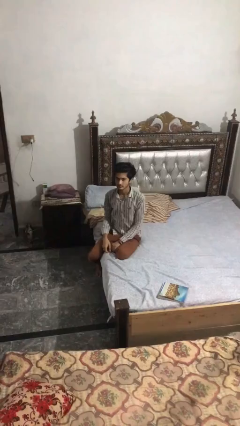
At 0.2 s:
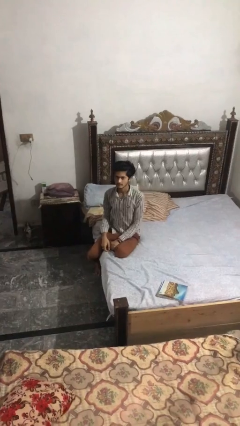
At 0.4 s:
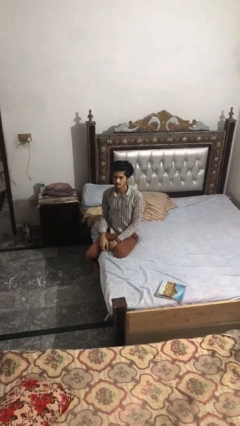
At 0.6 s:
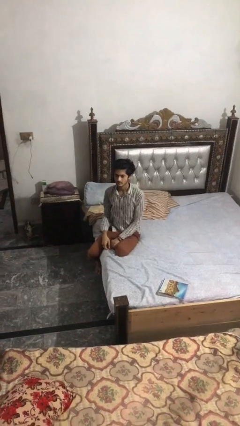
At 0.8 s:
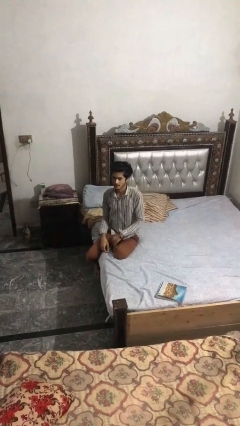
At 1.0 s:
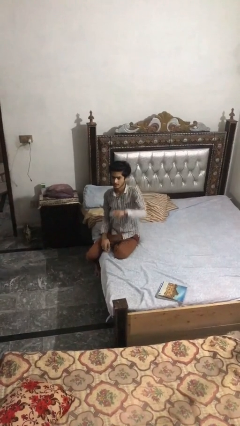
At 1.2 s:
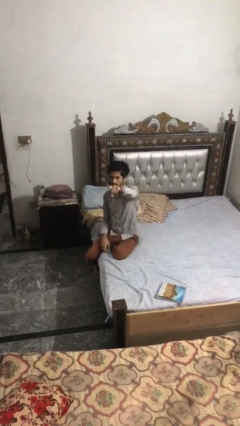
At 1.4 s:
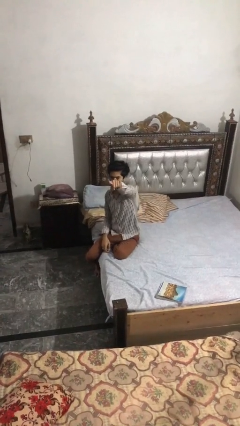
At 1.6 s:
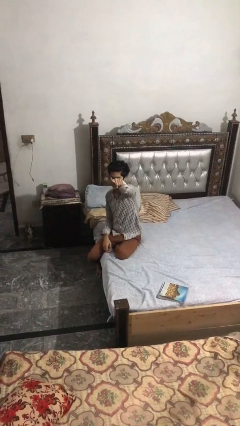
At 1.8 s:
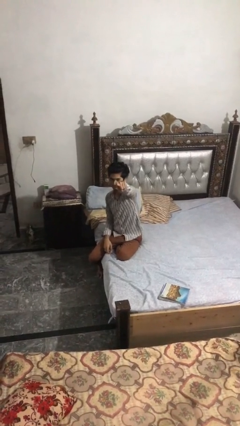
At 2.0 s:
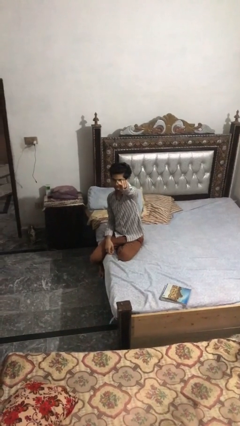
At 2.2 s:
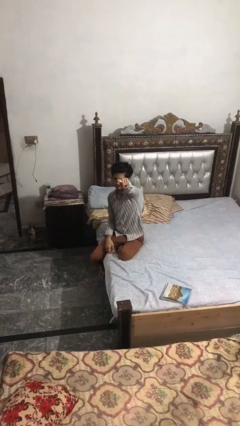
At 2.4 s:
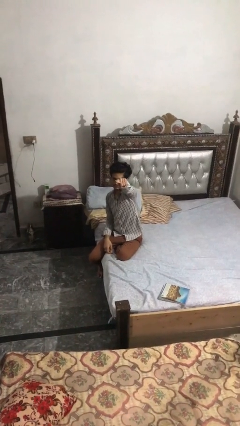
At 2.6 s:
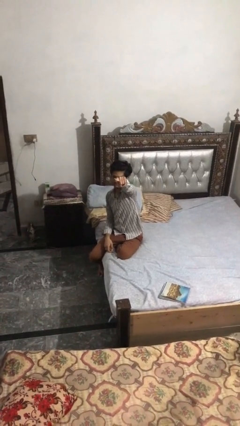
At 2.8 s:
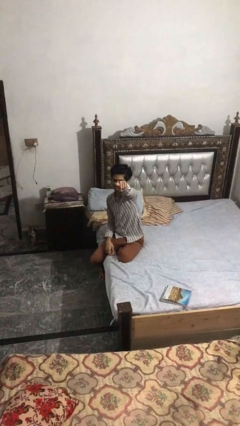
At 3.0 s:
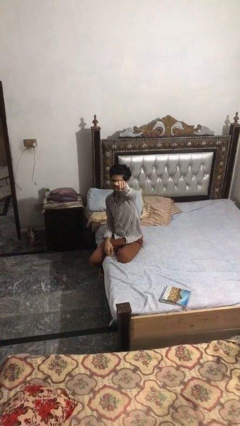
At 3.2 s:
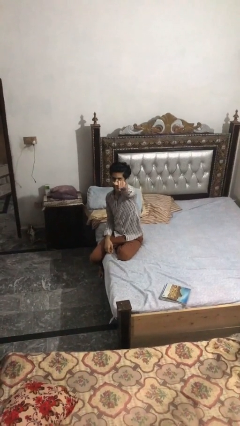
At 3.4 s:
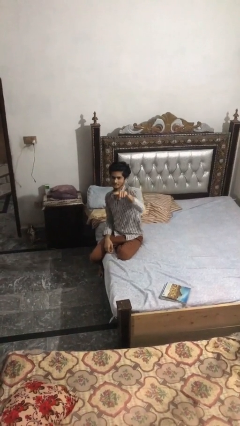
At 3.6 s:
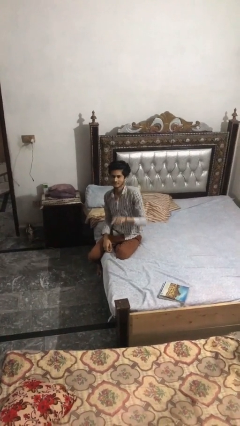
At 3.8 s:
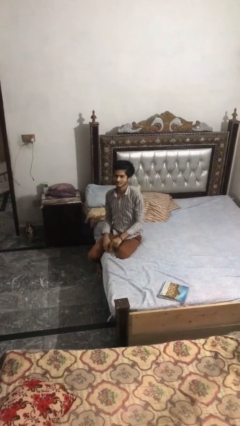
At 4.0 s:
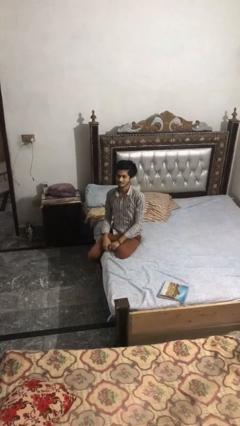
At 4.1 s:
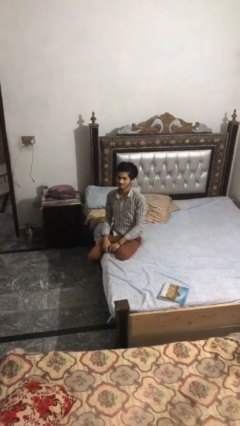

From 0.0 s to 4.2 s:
person points at person

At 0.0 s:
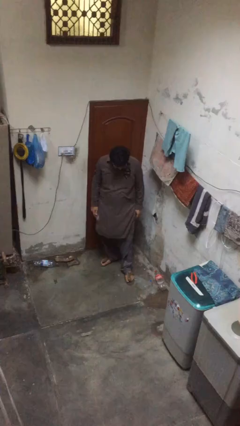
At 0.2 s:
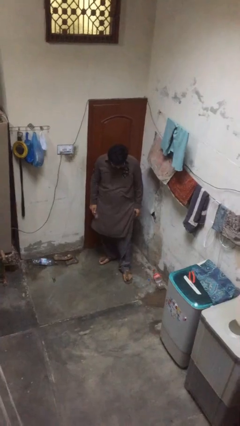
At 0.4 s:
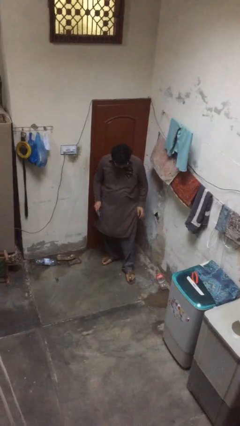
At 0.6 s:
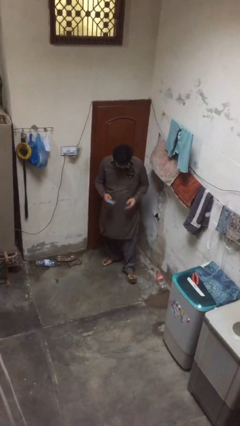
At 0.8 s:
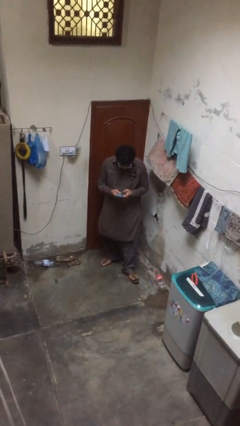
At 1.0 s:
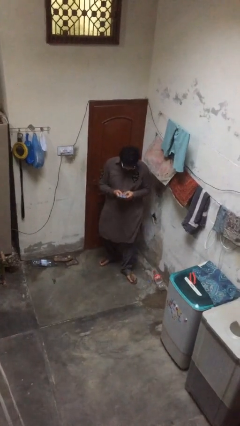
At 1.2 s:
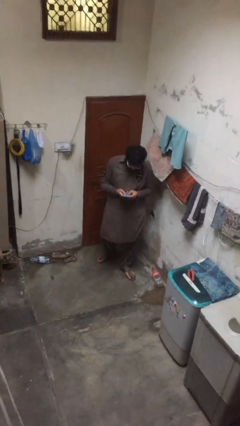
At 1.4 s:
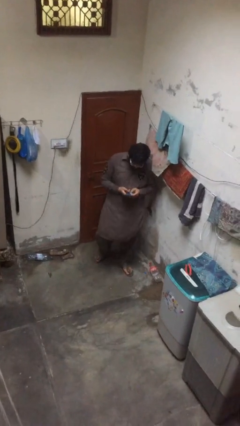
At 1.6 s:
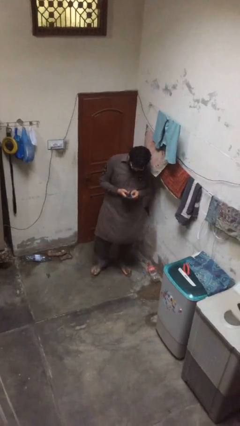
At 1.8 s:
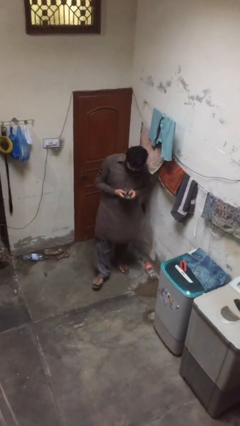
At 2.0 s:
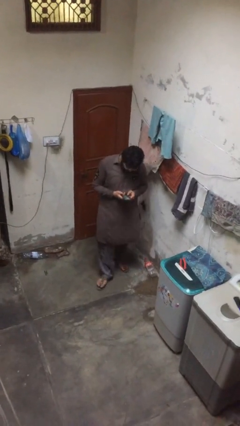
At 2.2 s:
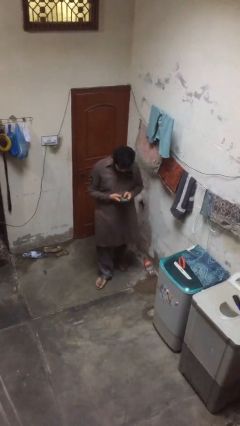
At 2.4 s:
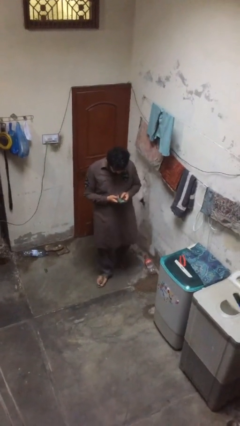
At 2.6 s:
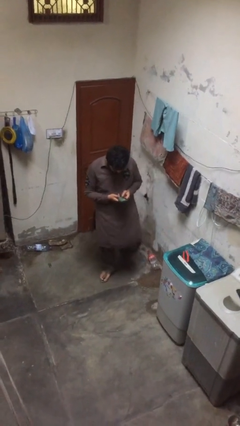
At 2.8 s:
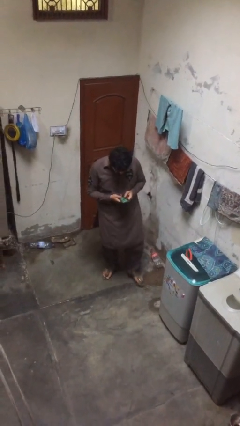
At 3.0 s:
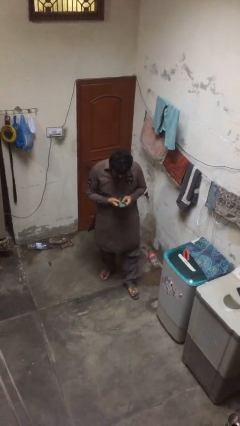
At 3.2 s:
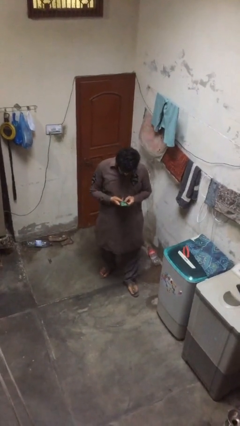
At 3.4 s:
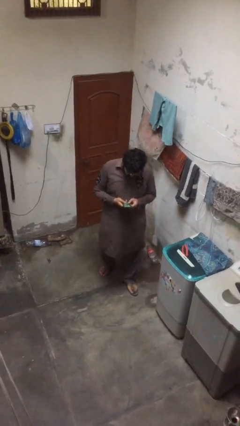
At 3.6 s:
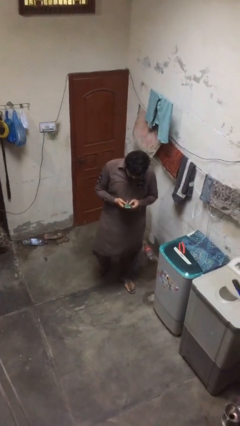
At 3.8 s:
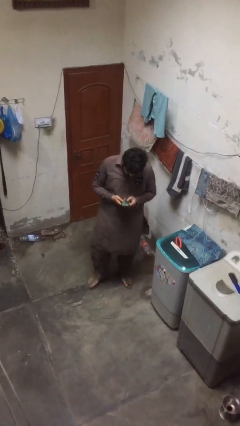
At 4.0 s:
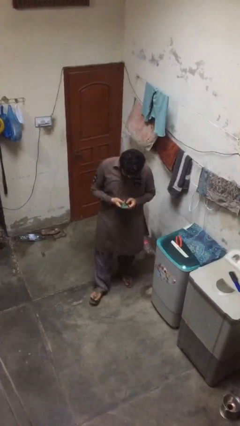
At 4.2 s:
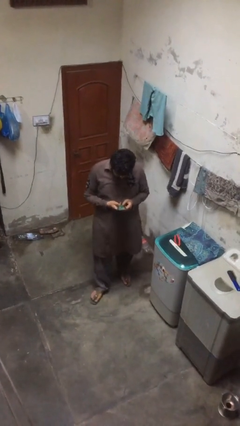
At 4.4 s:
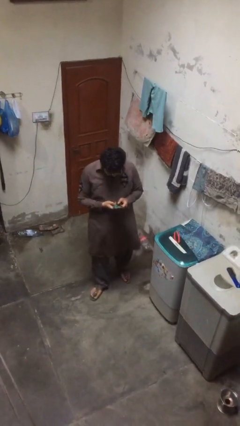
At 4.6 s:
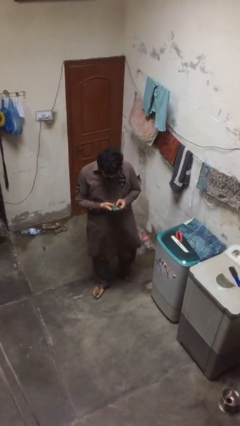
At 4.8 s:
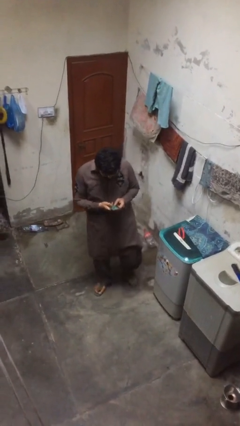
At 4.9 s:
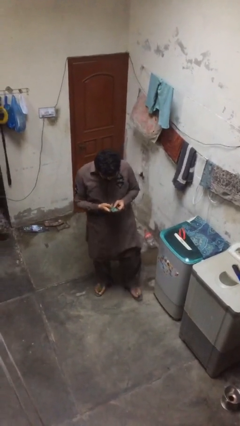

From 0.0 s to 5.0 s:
person texts on phone

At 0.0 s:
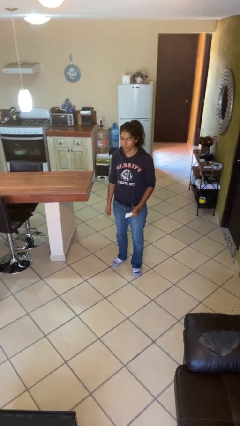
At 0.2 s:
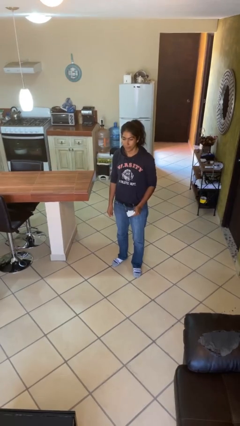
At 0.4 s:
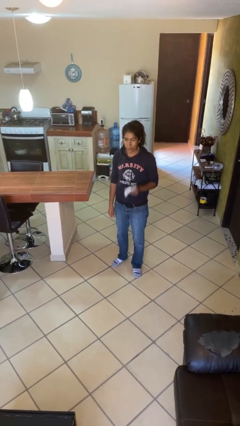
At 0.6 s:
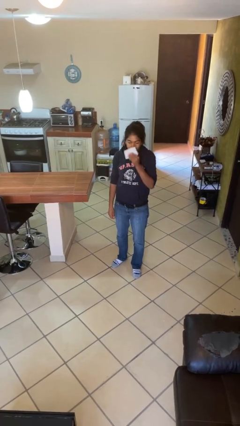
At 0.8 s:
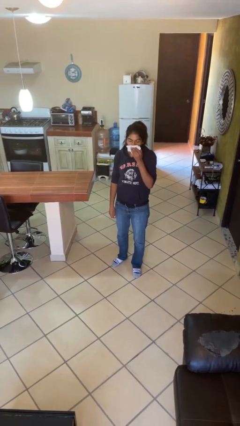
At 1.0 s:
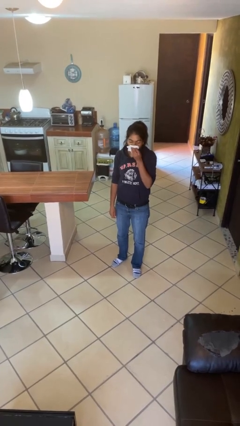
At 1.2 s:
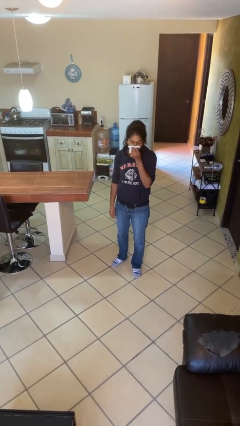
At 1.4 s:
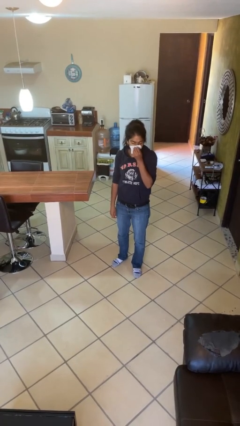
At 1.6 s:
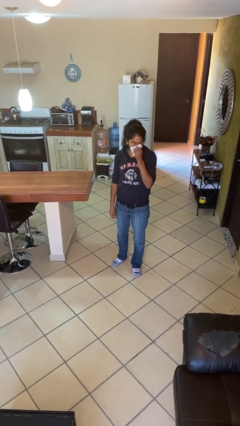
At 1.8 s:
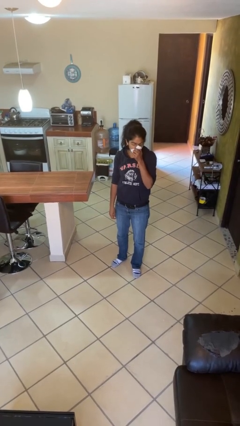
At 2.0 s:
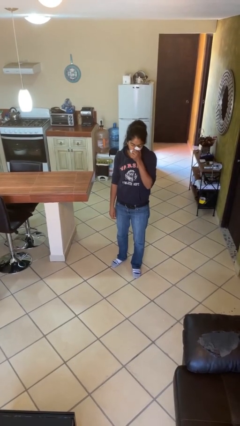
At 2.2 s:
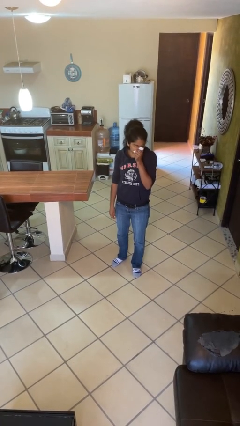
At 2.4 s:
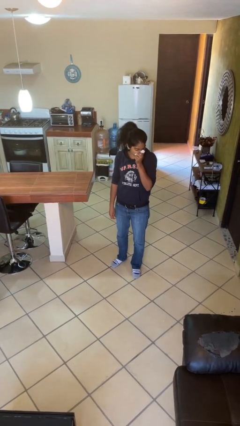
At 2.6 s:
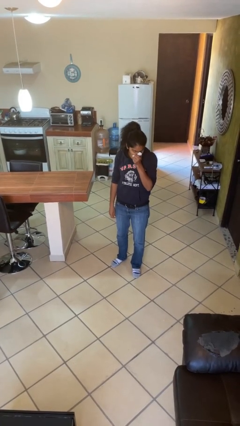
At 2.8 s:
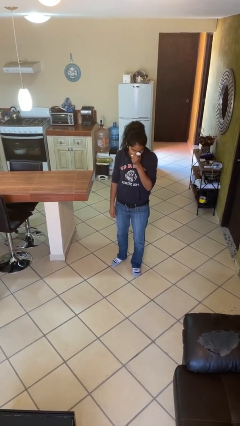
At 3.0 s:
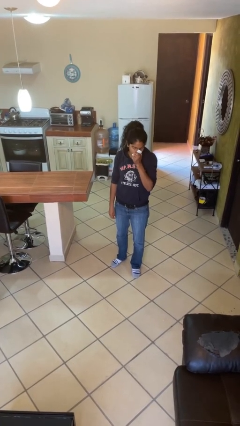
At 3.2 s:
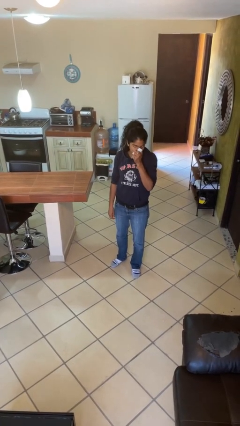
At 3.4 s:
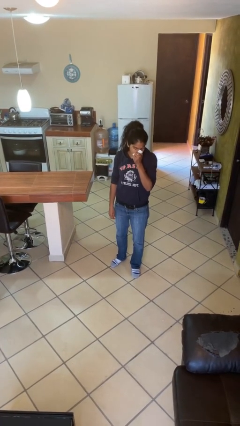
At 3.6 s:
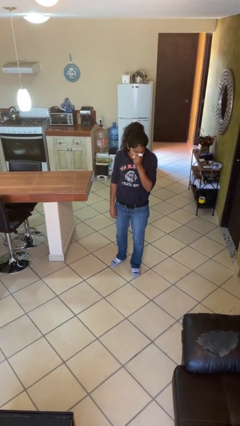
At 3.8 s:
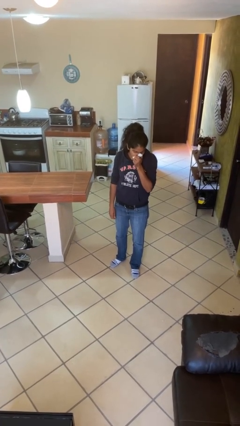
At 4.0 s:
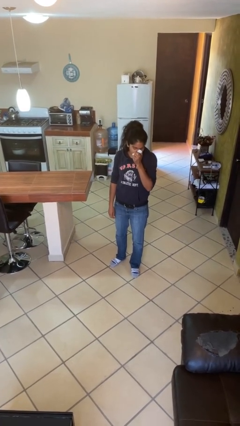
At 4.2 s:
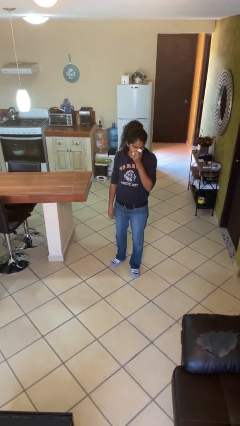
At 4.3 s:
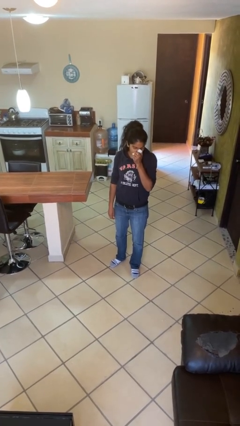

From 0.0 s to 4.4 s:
person blows nose

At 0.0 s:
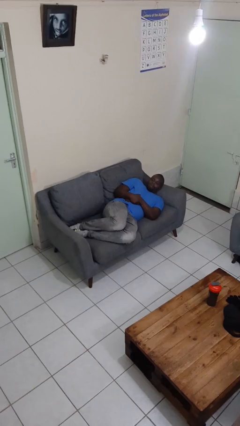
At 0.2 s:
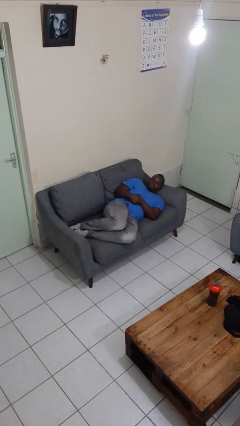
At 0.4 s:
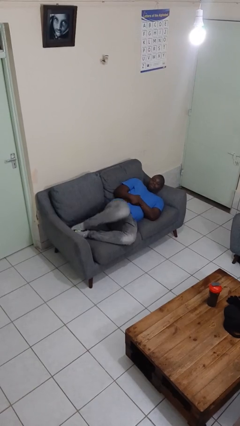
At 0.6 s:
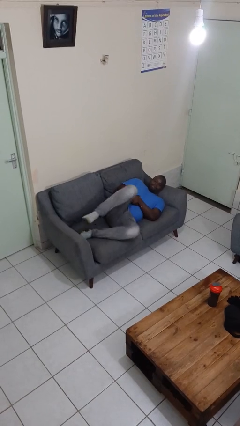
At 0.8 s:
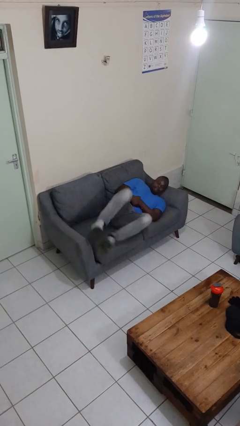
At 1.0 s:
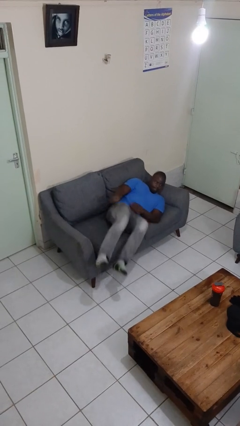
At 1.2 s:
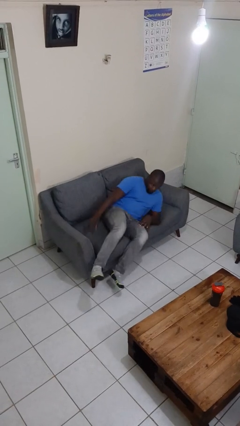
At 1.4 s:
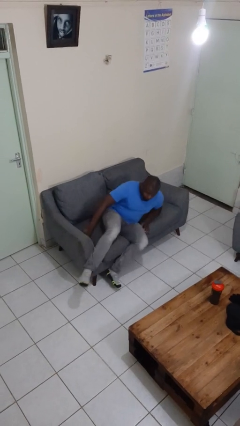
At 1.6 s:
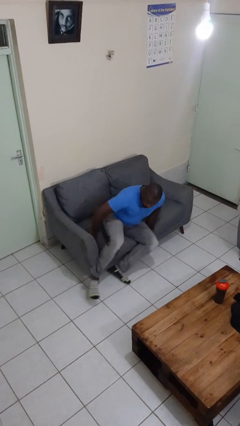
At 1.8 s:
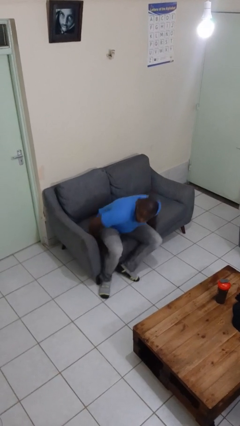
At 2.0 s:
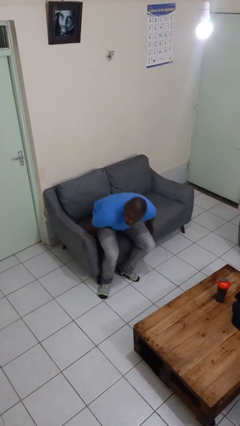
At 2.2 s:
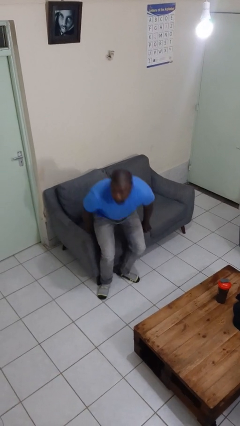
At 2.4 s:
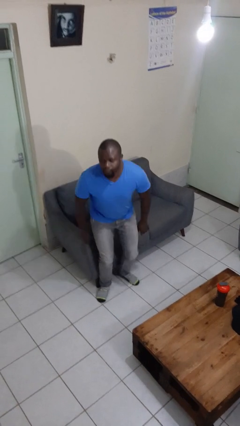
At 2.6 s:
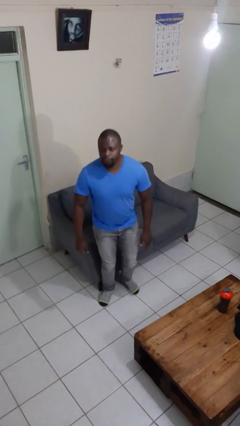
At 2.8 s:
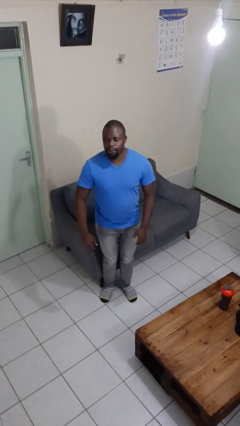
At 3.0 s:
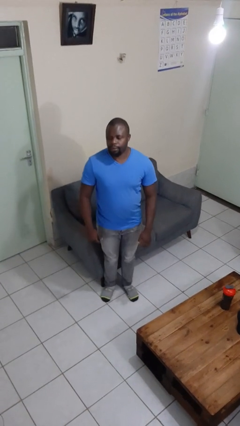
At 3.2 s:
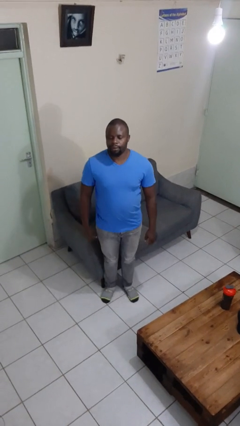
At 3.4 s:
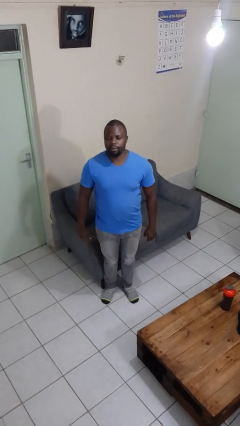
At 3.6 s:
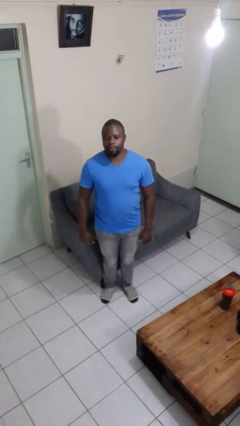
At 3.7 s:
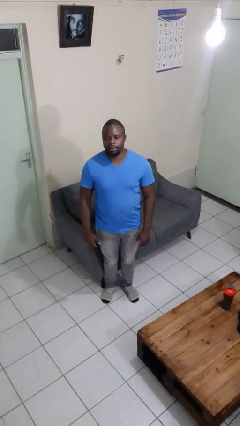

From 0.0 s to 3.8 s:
person stands up
